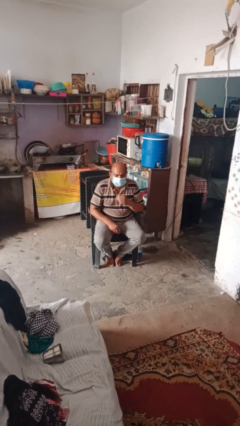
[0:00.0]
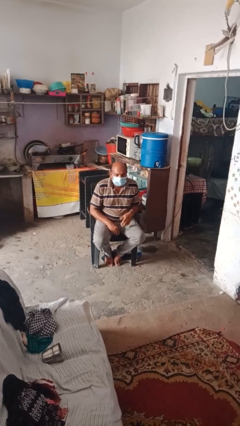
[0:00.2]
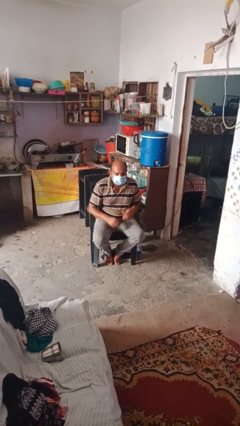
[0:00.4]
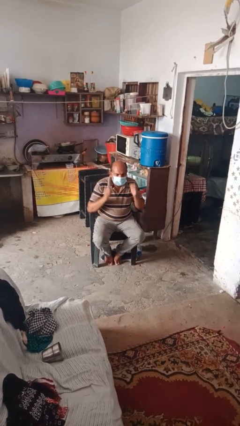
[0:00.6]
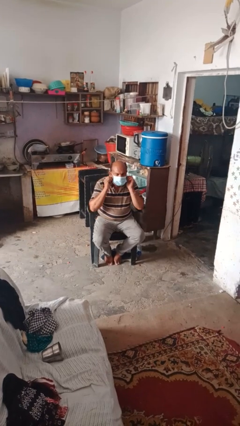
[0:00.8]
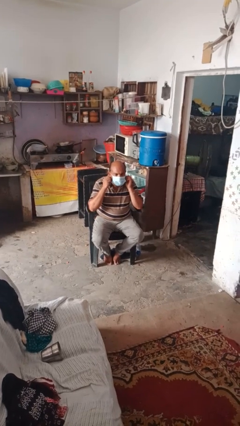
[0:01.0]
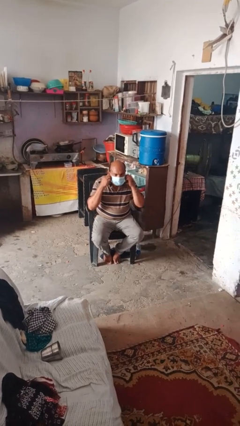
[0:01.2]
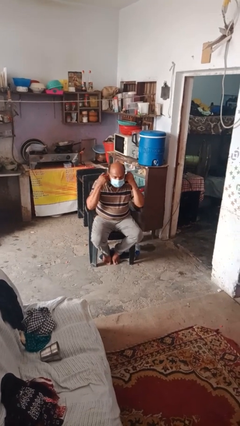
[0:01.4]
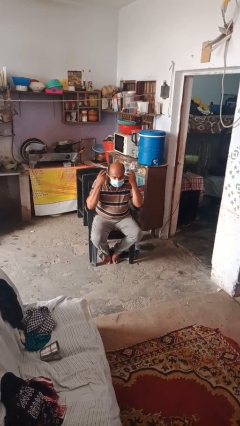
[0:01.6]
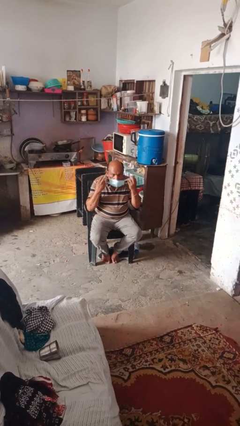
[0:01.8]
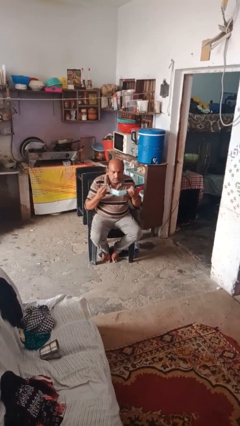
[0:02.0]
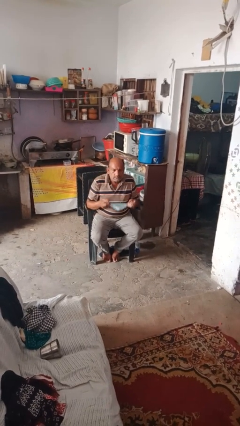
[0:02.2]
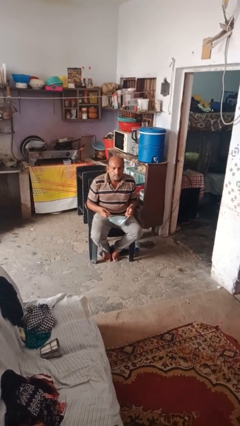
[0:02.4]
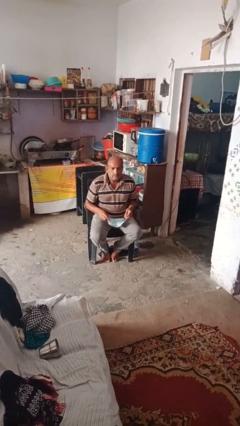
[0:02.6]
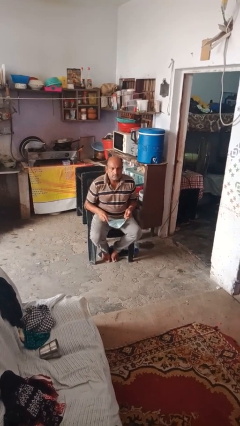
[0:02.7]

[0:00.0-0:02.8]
person takes off facemask

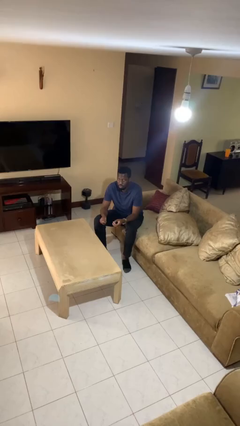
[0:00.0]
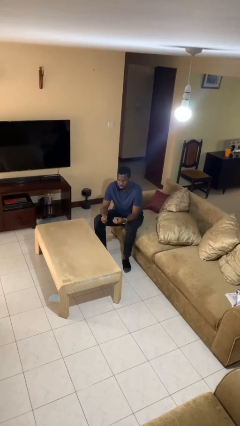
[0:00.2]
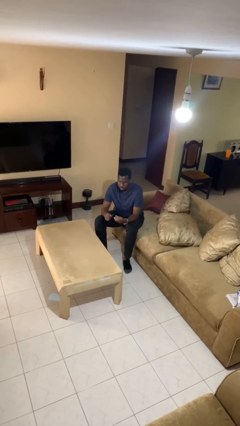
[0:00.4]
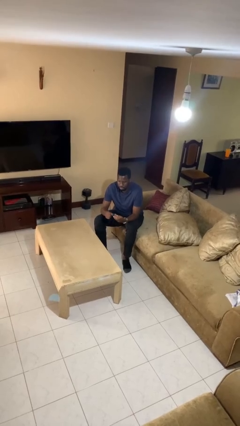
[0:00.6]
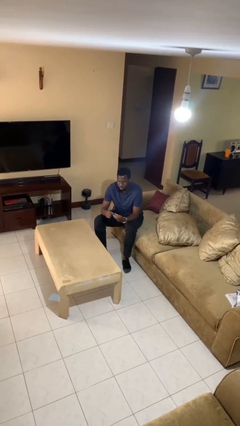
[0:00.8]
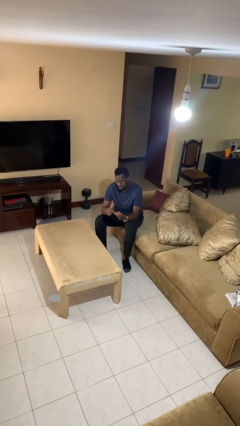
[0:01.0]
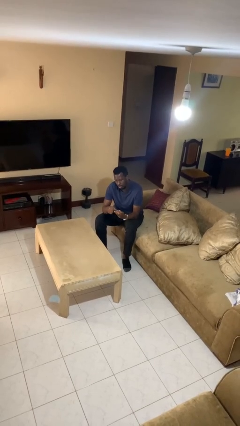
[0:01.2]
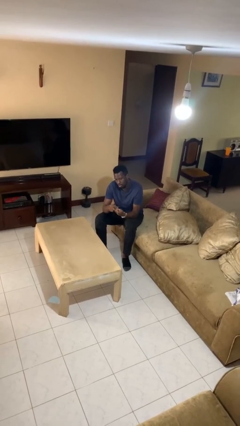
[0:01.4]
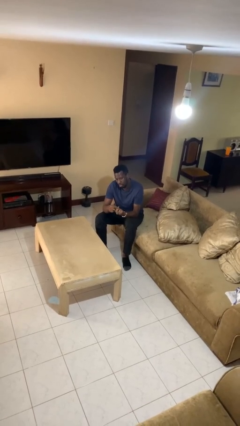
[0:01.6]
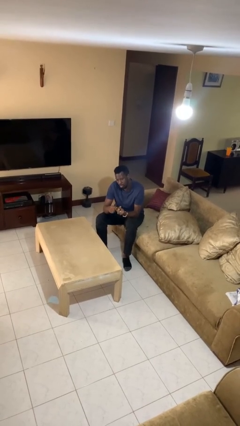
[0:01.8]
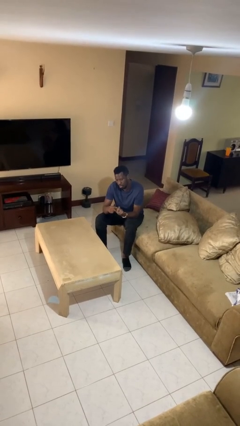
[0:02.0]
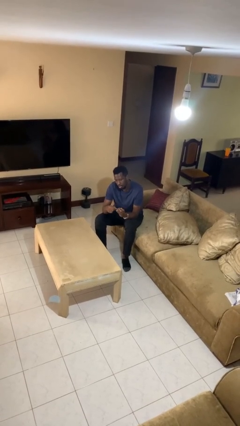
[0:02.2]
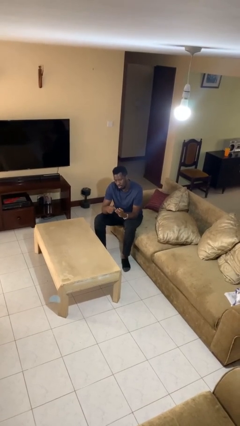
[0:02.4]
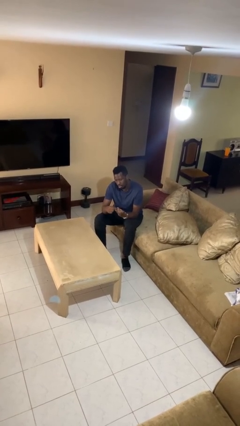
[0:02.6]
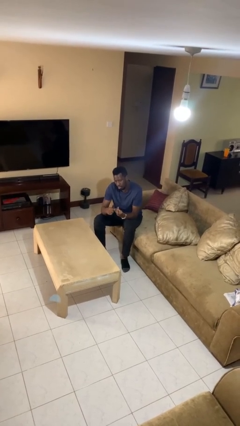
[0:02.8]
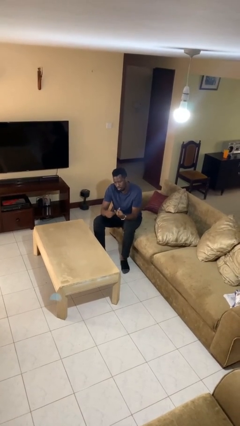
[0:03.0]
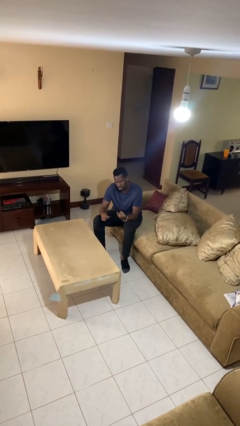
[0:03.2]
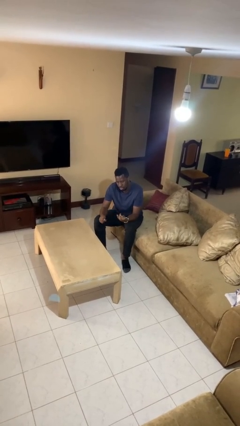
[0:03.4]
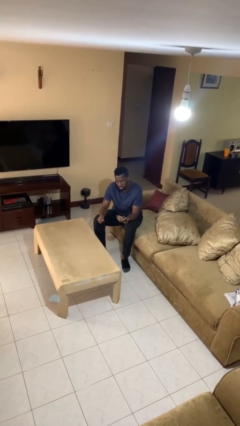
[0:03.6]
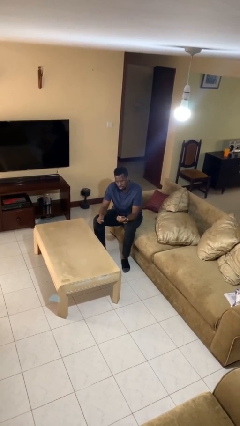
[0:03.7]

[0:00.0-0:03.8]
person files fingernails

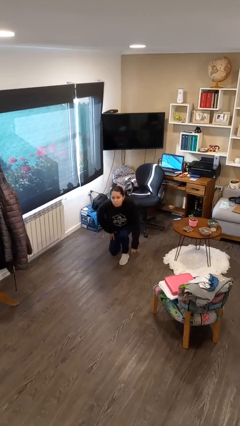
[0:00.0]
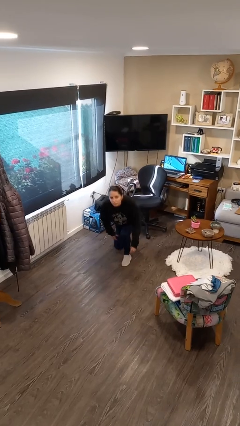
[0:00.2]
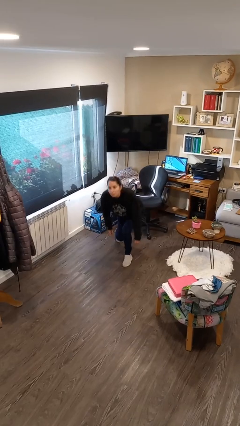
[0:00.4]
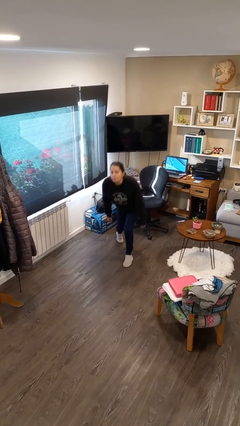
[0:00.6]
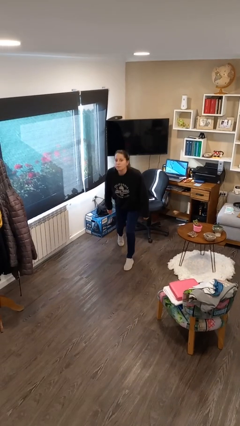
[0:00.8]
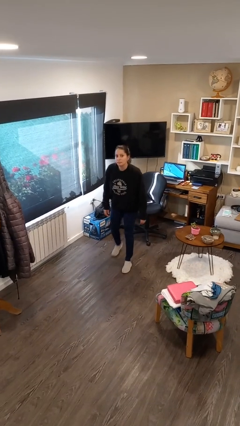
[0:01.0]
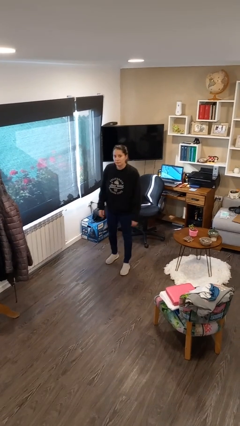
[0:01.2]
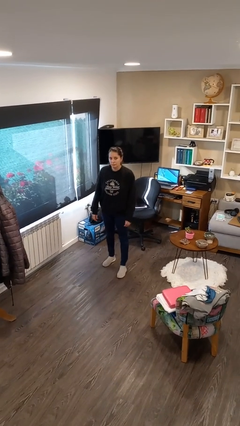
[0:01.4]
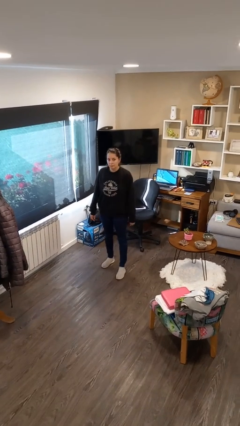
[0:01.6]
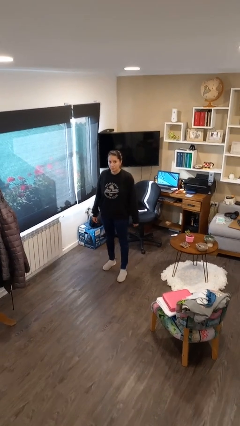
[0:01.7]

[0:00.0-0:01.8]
person stands up from floor

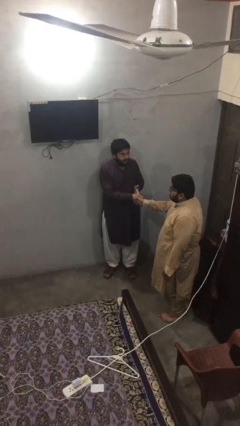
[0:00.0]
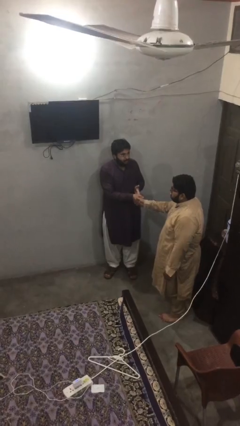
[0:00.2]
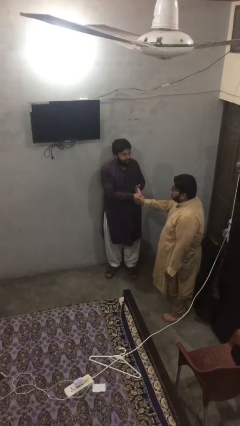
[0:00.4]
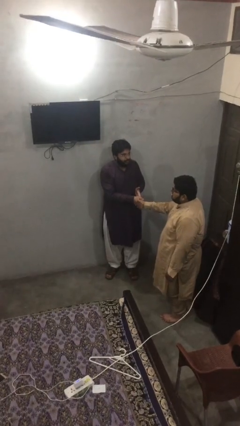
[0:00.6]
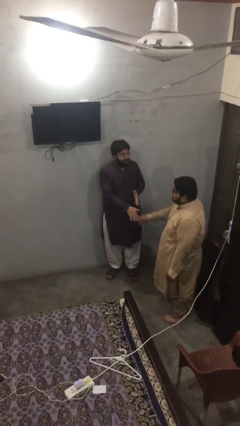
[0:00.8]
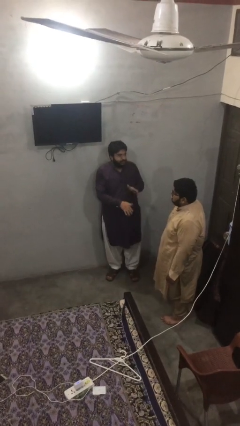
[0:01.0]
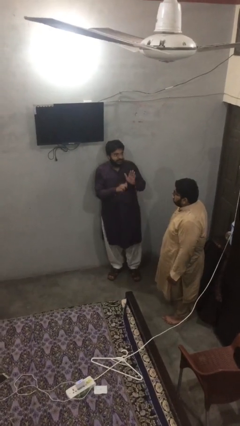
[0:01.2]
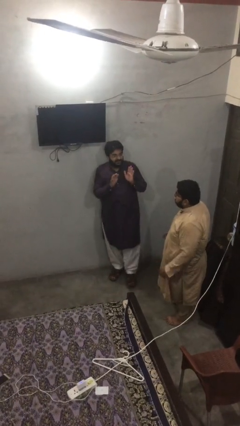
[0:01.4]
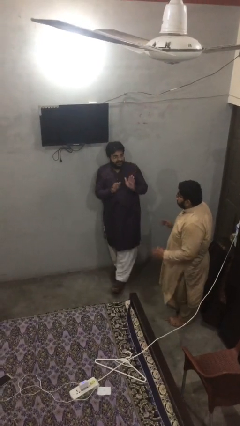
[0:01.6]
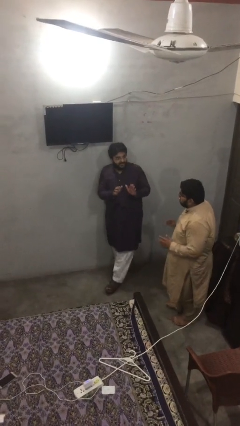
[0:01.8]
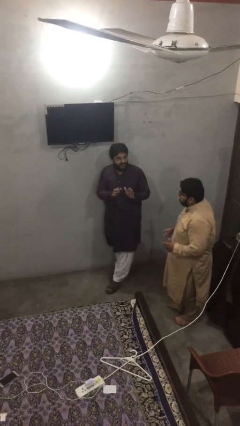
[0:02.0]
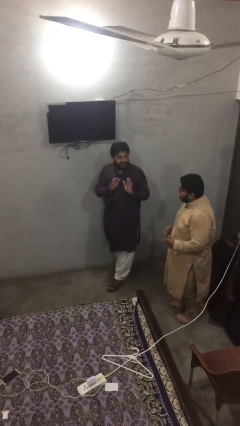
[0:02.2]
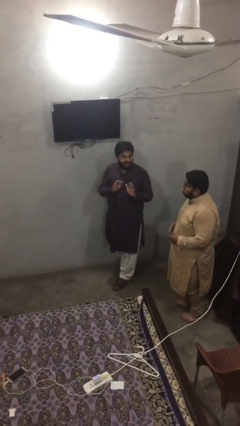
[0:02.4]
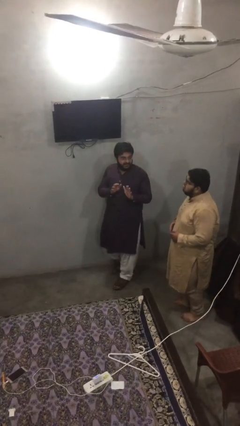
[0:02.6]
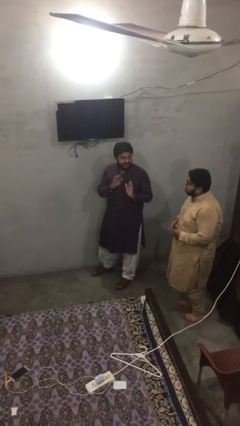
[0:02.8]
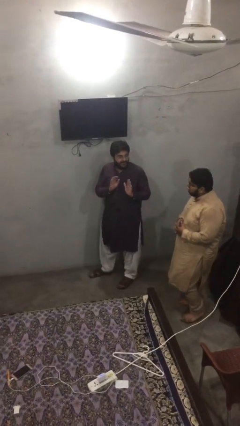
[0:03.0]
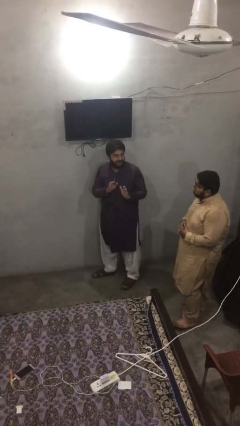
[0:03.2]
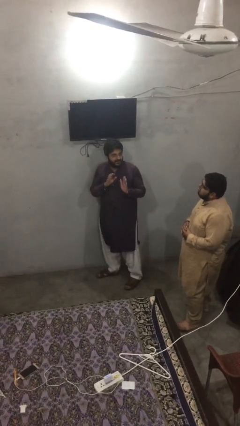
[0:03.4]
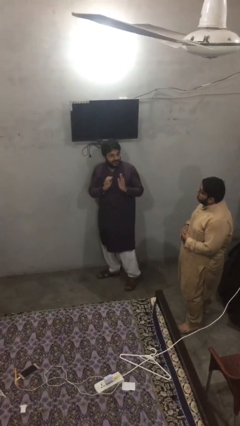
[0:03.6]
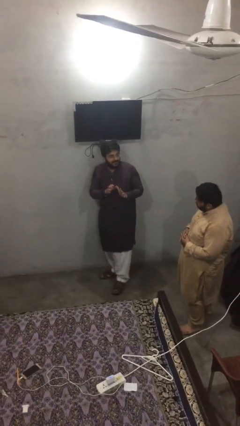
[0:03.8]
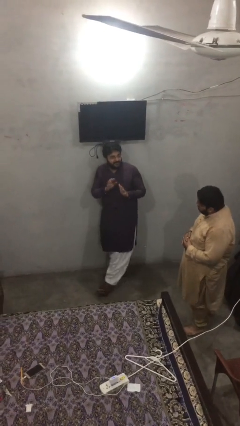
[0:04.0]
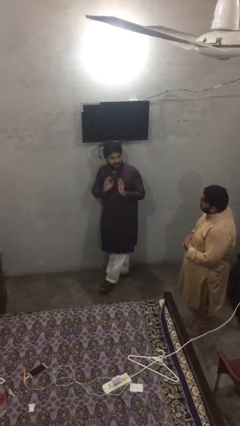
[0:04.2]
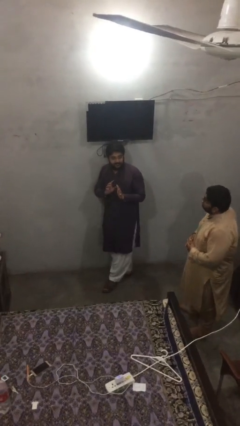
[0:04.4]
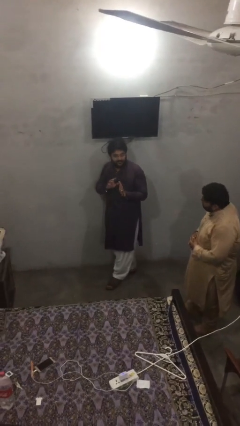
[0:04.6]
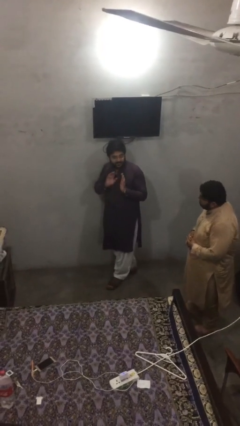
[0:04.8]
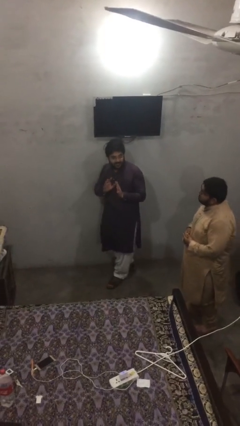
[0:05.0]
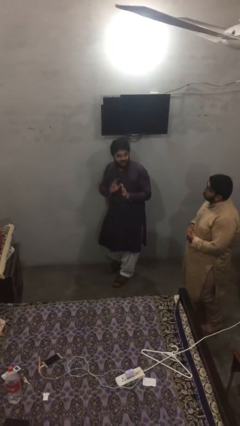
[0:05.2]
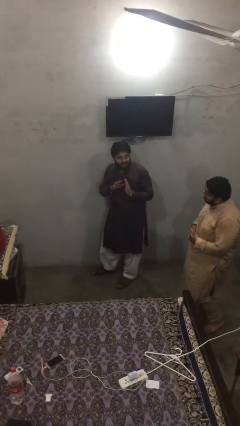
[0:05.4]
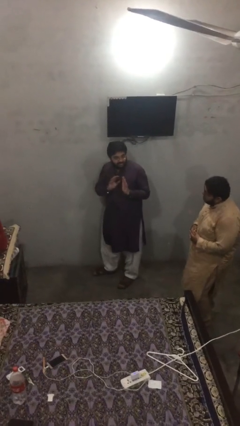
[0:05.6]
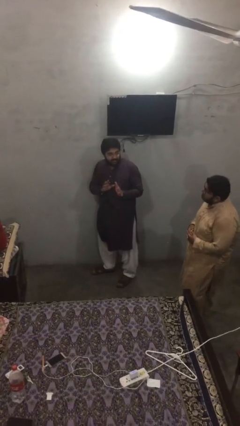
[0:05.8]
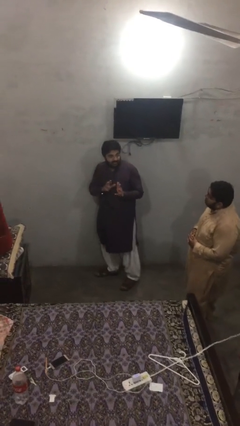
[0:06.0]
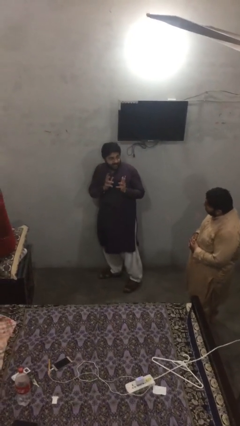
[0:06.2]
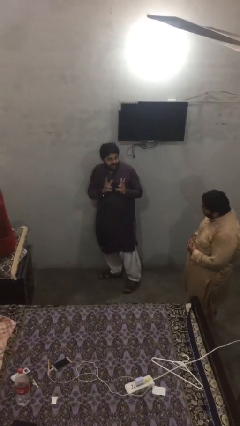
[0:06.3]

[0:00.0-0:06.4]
person talks to person

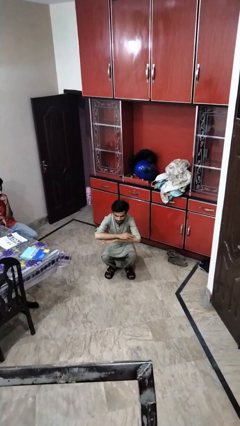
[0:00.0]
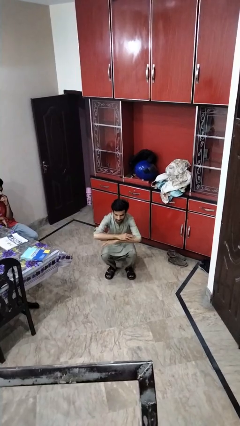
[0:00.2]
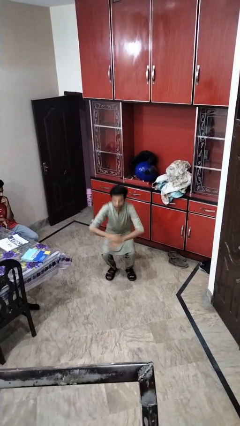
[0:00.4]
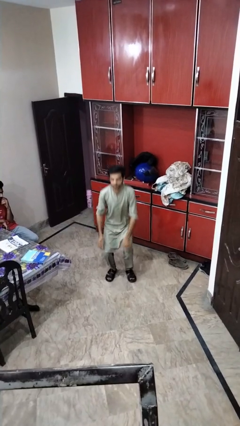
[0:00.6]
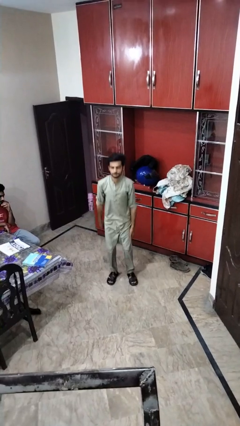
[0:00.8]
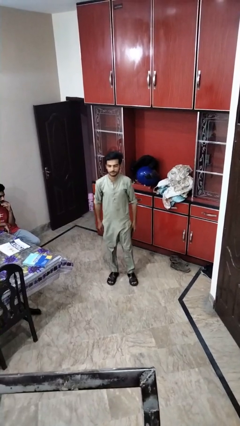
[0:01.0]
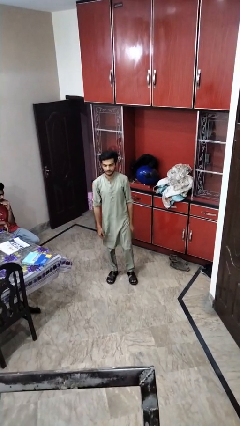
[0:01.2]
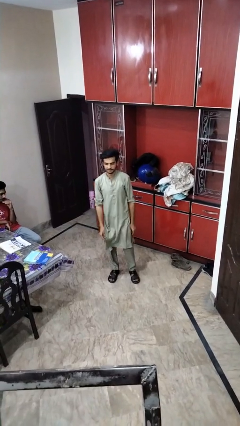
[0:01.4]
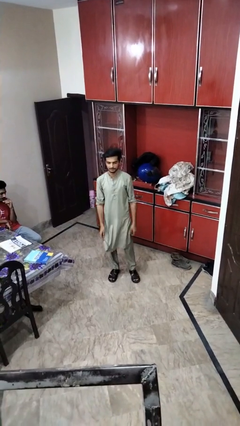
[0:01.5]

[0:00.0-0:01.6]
person stands up

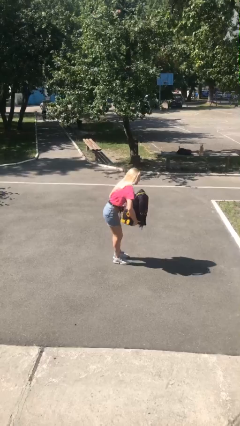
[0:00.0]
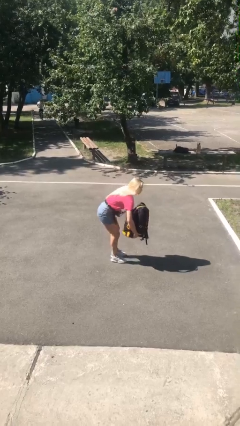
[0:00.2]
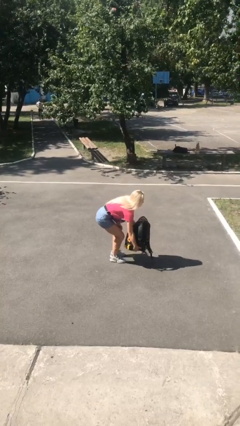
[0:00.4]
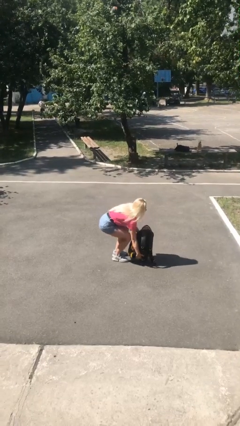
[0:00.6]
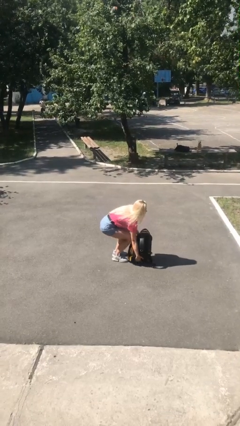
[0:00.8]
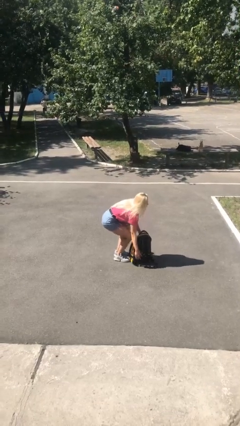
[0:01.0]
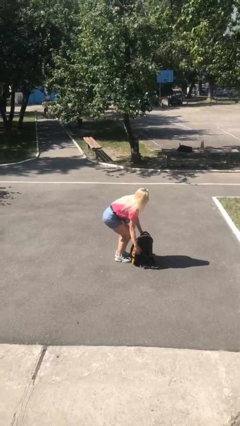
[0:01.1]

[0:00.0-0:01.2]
person puts down object on floor
